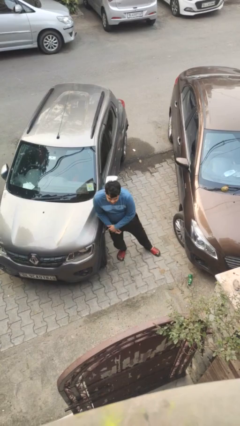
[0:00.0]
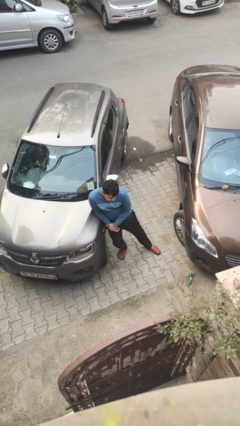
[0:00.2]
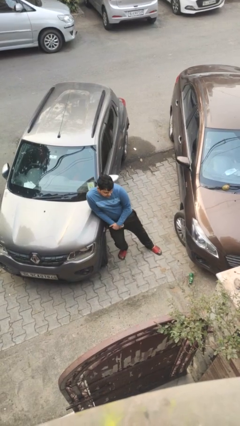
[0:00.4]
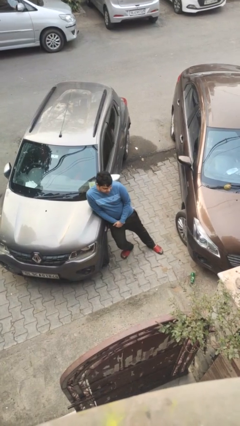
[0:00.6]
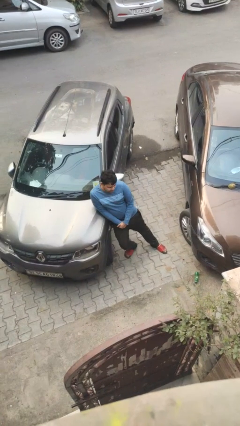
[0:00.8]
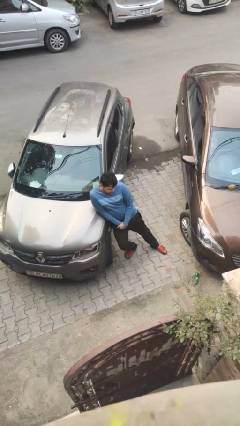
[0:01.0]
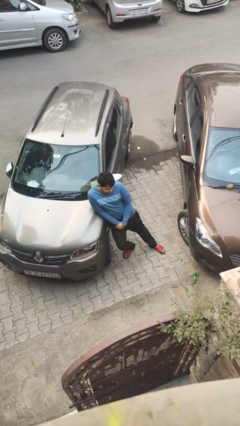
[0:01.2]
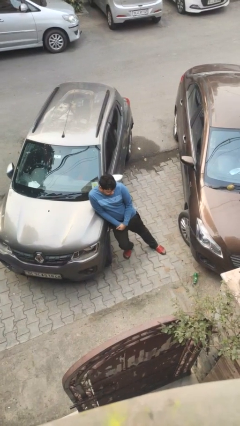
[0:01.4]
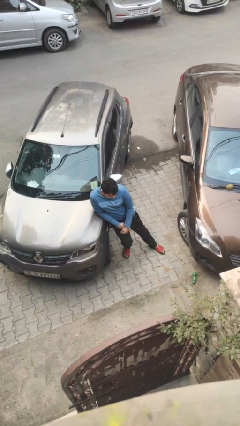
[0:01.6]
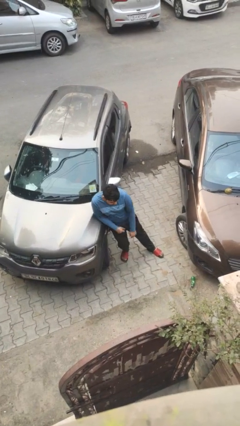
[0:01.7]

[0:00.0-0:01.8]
person leans against car

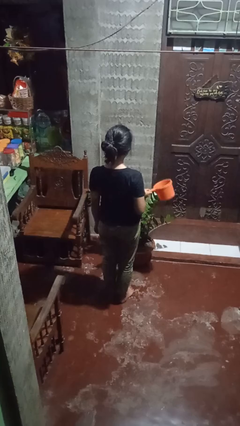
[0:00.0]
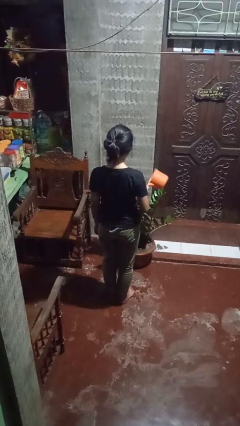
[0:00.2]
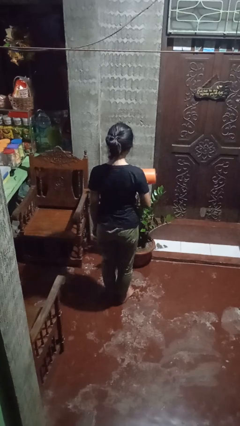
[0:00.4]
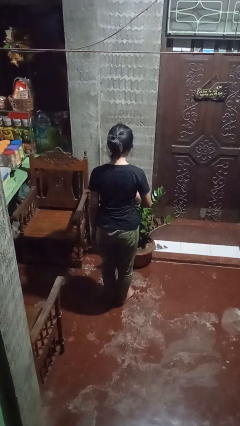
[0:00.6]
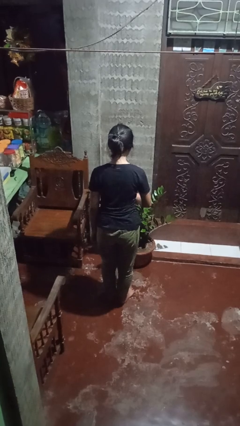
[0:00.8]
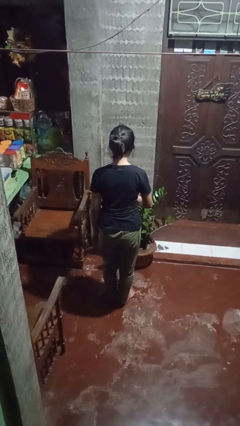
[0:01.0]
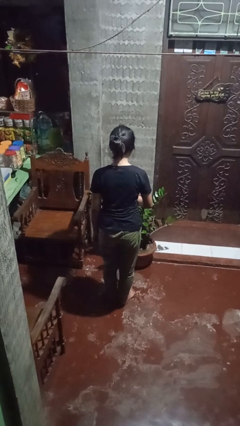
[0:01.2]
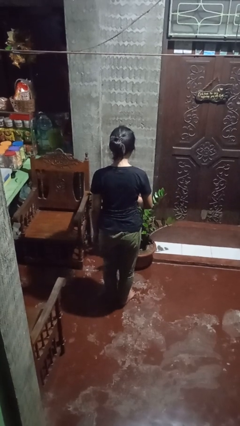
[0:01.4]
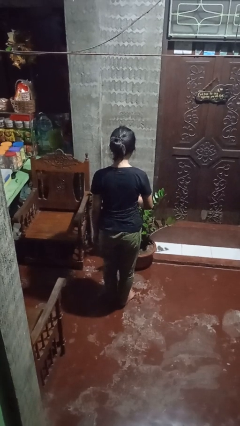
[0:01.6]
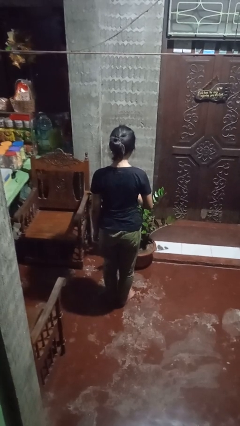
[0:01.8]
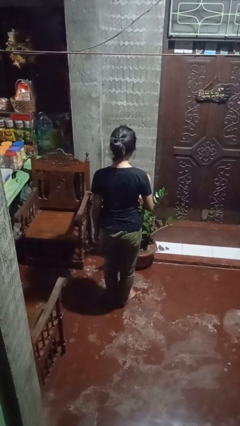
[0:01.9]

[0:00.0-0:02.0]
person waters houseplant

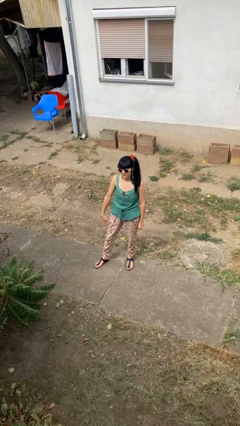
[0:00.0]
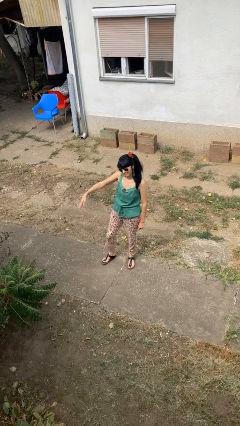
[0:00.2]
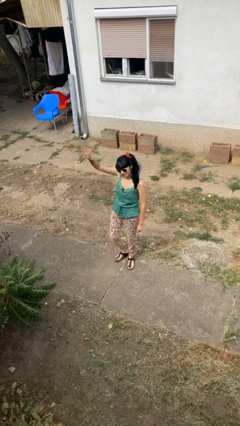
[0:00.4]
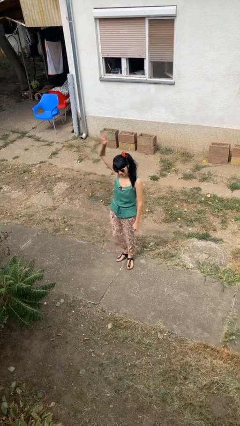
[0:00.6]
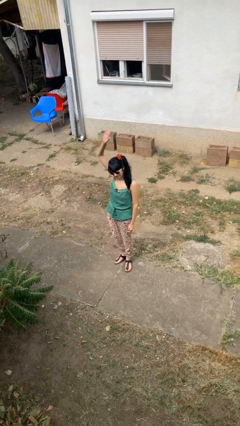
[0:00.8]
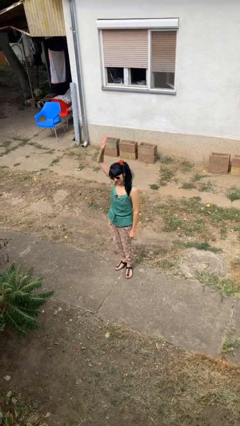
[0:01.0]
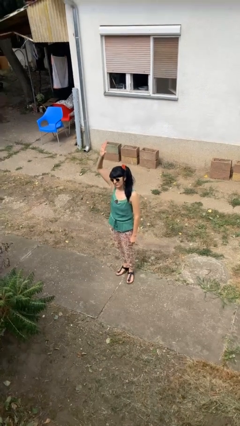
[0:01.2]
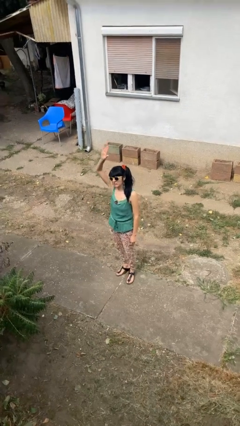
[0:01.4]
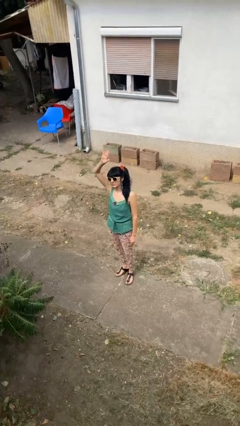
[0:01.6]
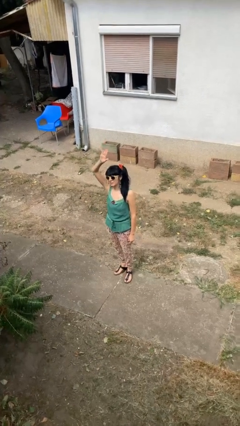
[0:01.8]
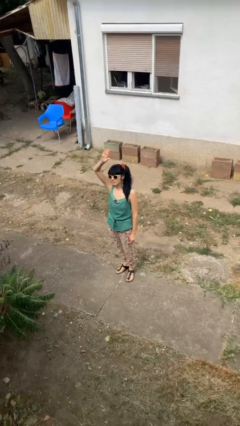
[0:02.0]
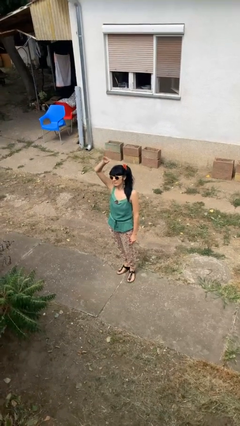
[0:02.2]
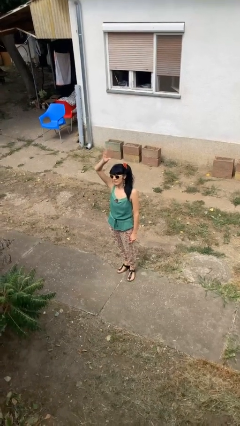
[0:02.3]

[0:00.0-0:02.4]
person gestures raise hand

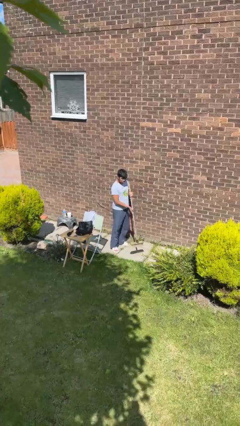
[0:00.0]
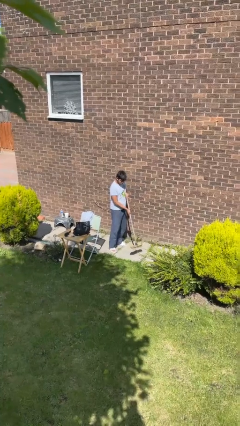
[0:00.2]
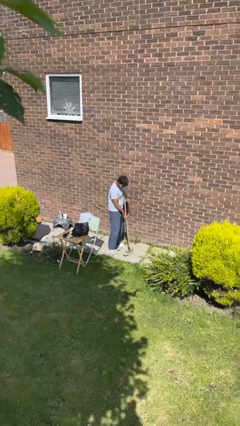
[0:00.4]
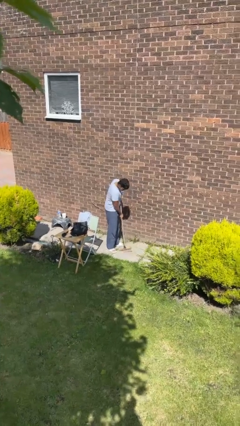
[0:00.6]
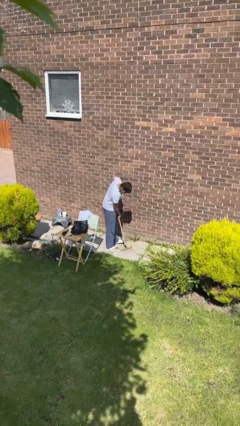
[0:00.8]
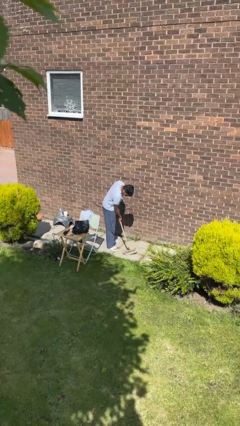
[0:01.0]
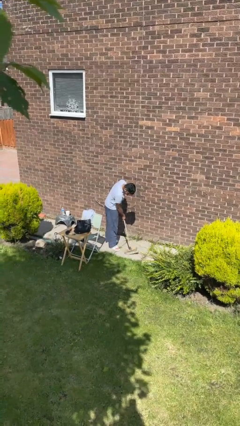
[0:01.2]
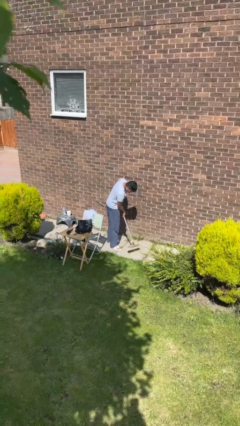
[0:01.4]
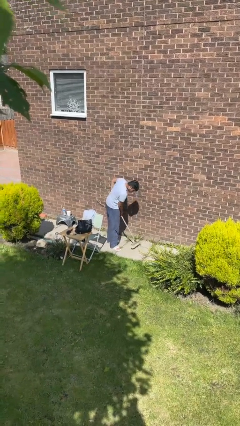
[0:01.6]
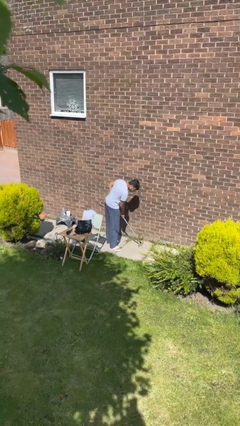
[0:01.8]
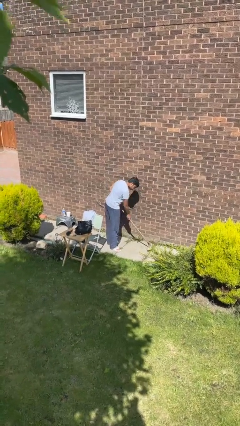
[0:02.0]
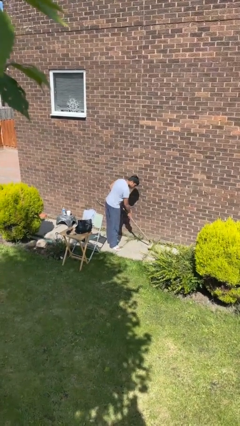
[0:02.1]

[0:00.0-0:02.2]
person sweeps floor

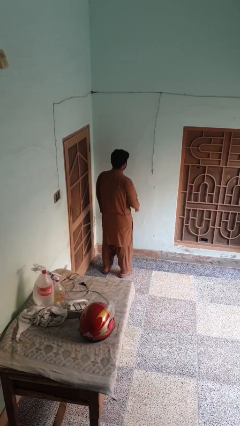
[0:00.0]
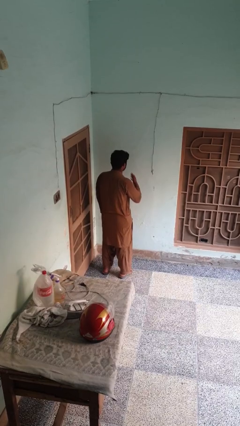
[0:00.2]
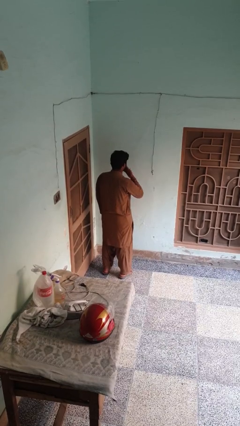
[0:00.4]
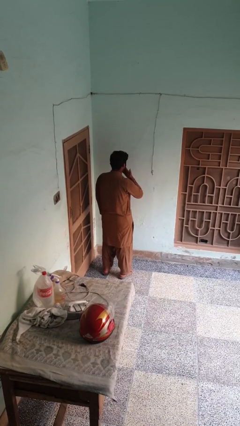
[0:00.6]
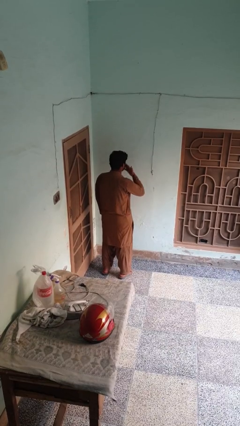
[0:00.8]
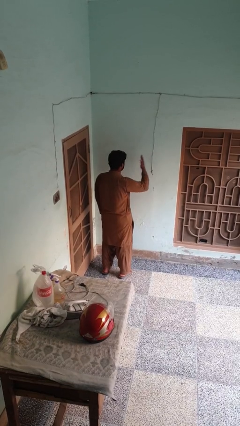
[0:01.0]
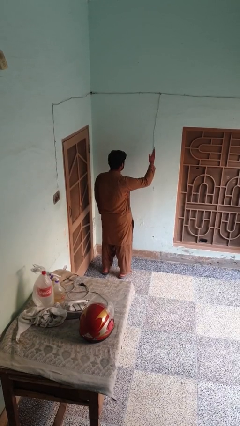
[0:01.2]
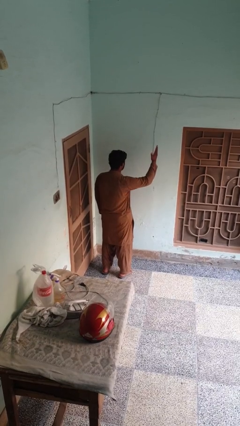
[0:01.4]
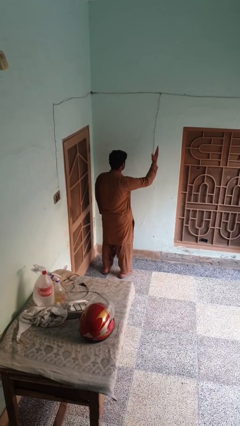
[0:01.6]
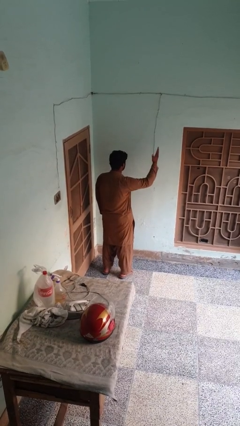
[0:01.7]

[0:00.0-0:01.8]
person gestures blow kiss

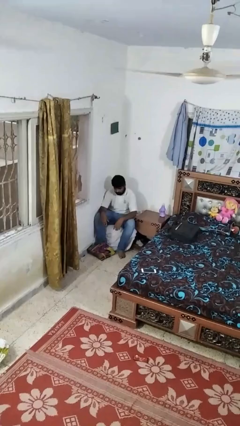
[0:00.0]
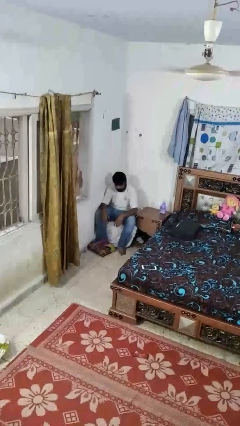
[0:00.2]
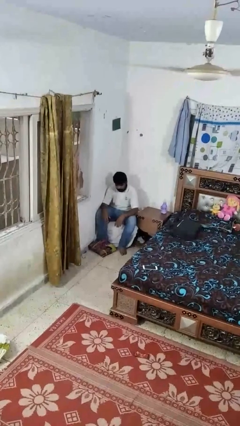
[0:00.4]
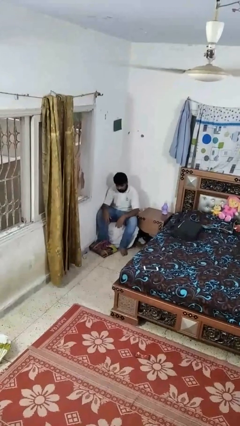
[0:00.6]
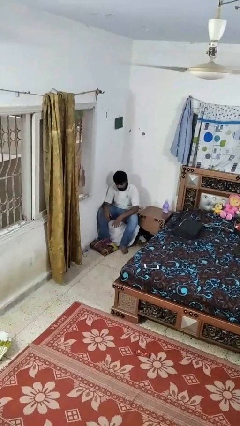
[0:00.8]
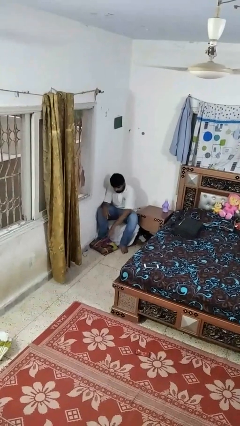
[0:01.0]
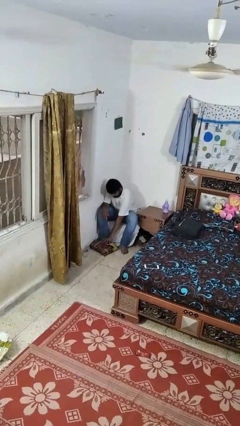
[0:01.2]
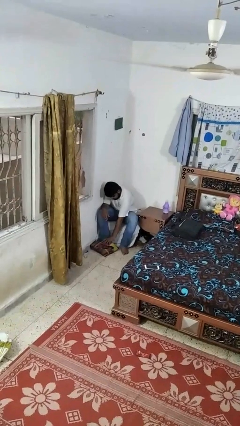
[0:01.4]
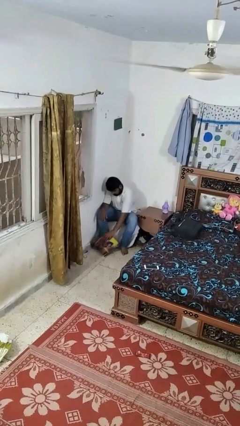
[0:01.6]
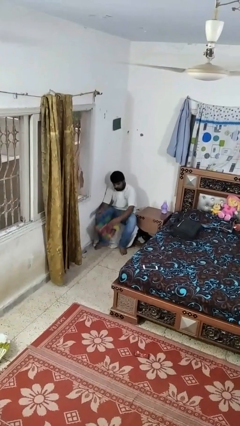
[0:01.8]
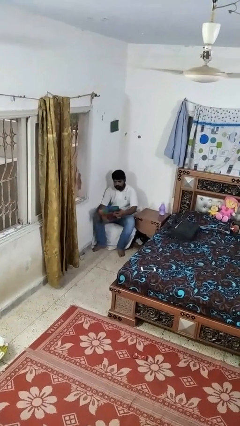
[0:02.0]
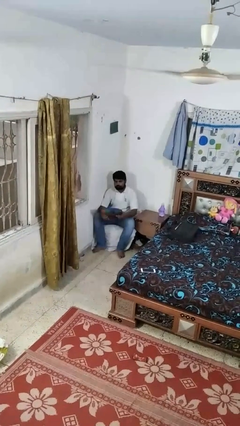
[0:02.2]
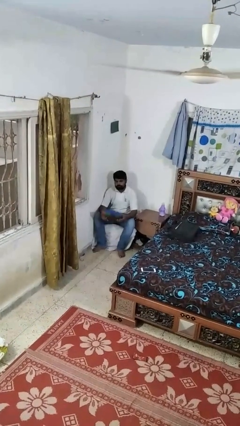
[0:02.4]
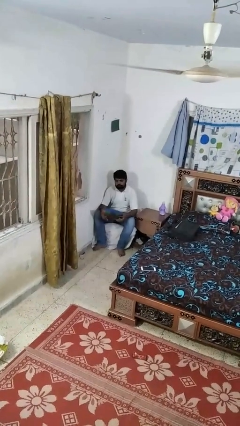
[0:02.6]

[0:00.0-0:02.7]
person picks up object from floor

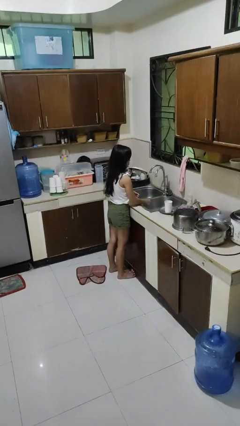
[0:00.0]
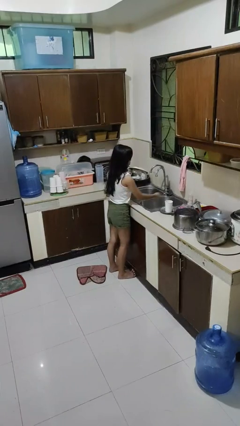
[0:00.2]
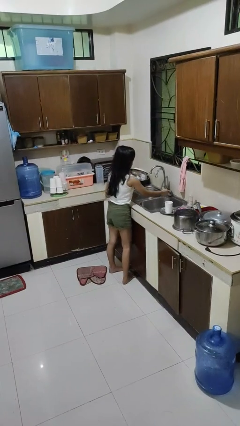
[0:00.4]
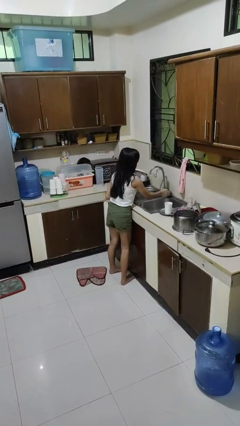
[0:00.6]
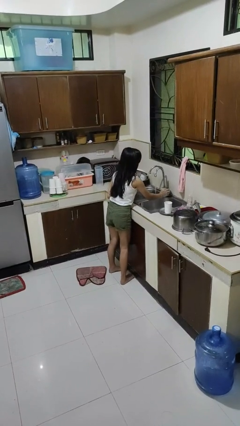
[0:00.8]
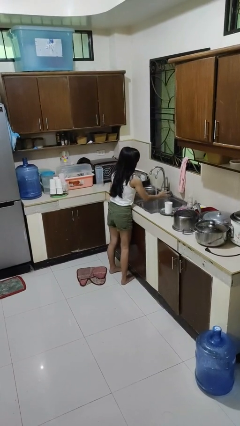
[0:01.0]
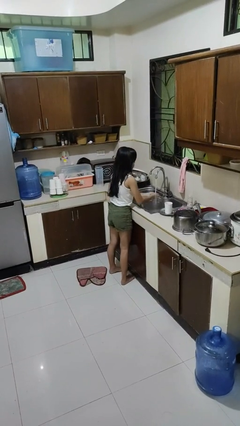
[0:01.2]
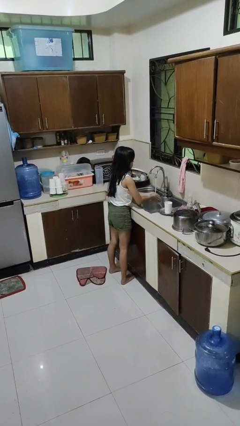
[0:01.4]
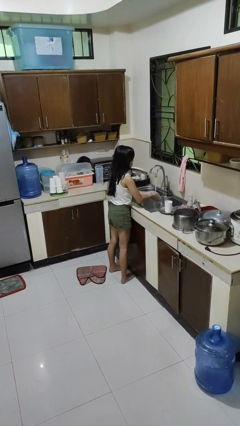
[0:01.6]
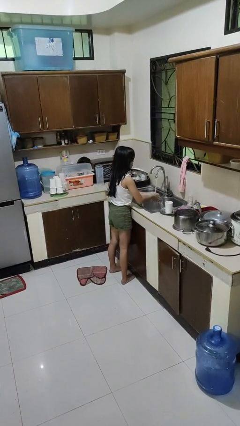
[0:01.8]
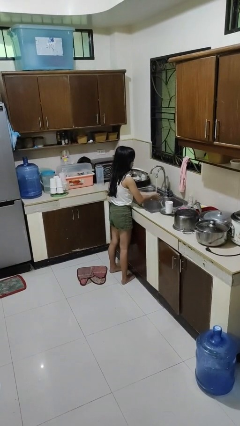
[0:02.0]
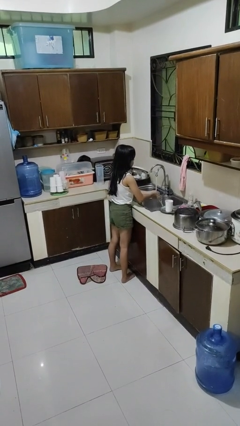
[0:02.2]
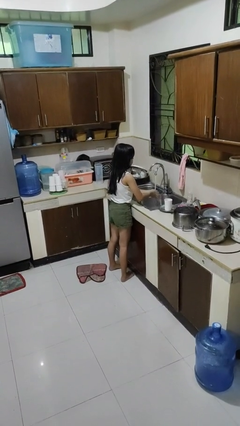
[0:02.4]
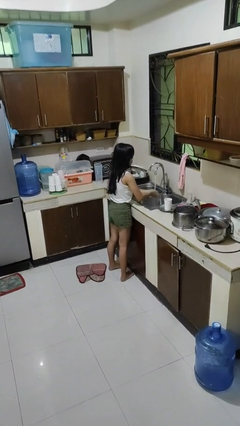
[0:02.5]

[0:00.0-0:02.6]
person washes hands

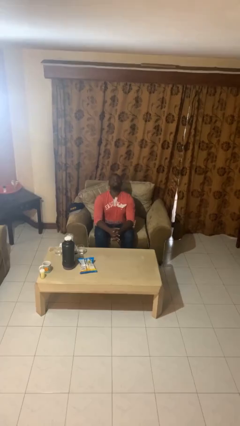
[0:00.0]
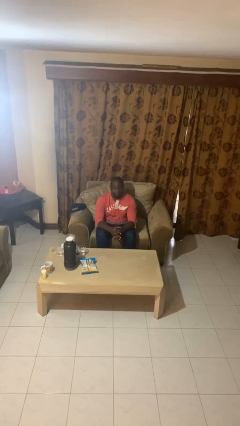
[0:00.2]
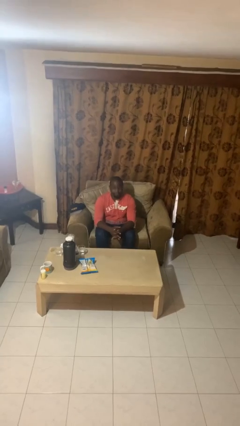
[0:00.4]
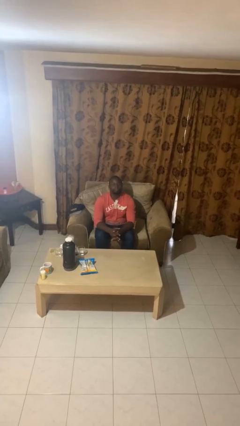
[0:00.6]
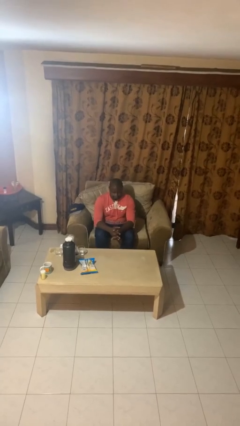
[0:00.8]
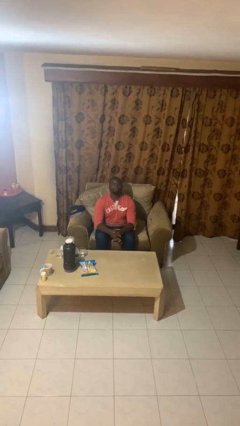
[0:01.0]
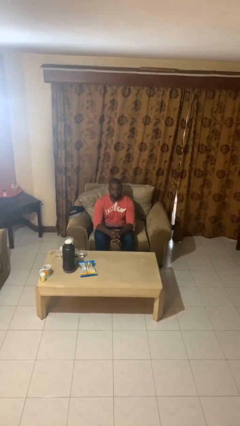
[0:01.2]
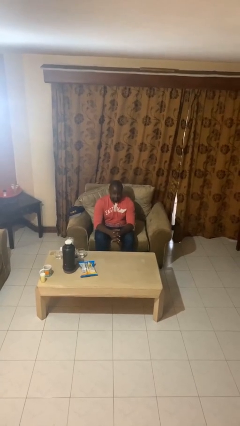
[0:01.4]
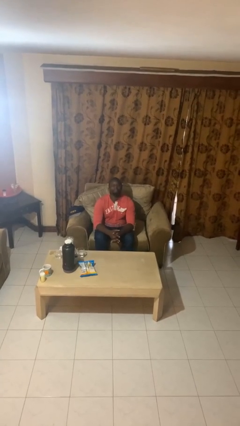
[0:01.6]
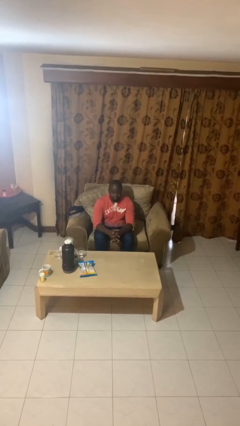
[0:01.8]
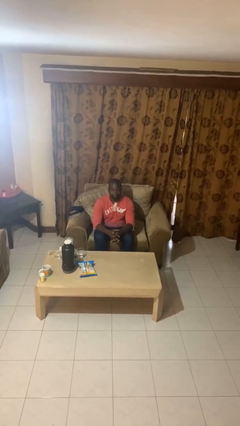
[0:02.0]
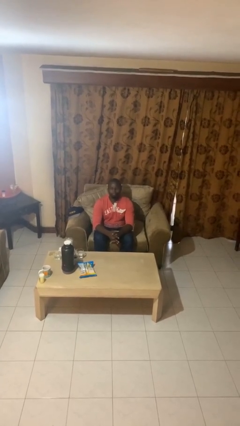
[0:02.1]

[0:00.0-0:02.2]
person nods head
